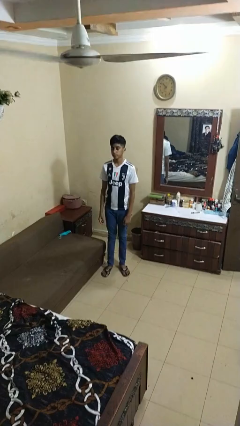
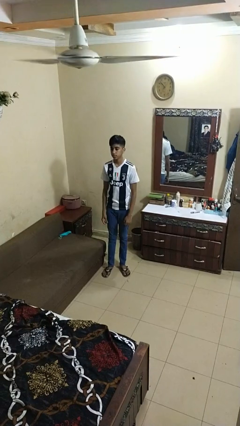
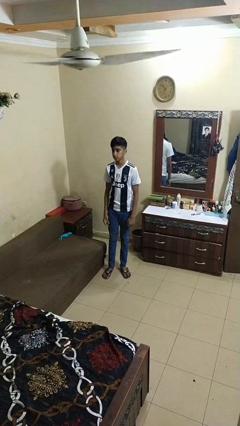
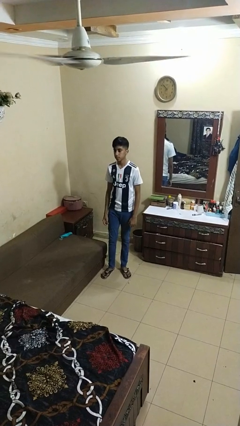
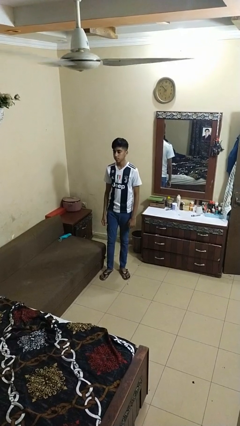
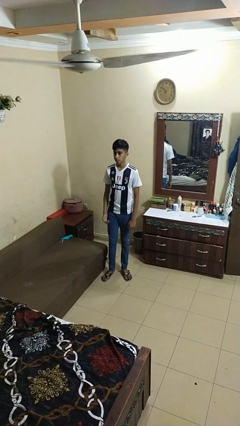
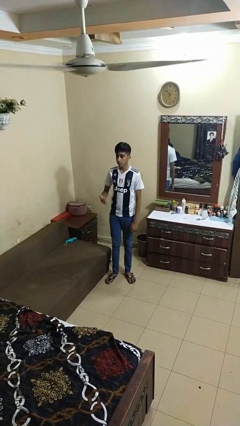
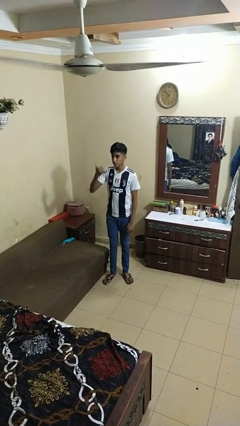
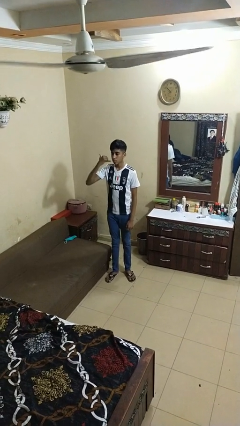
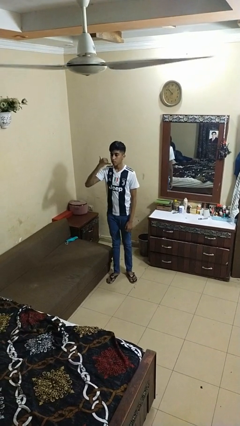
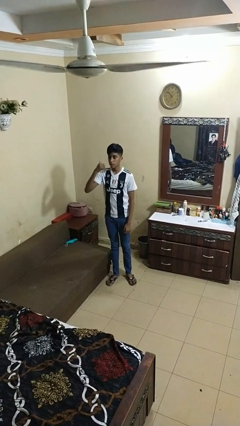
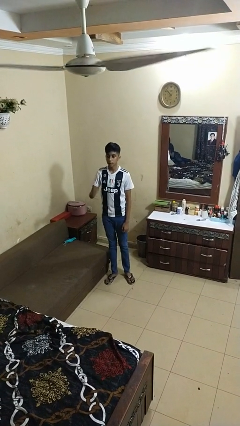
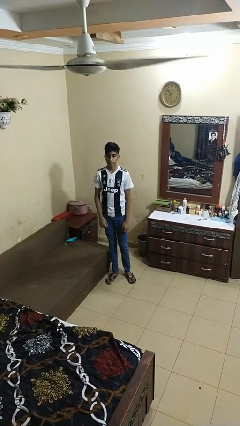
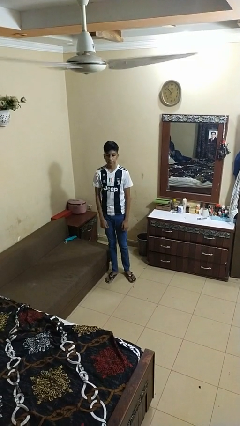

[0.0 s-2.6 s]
person gestures call me

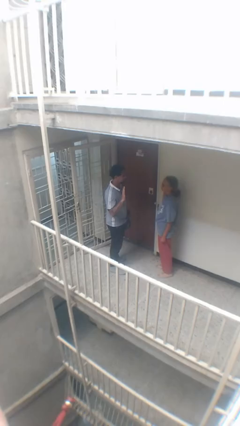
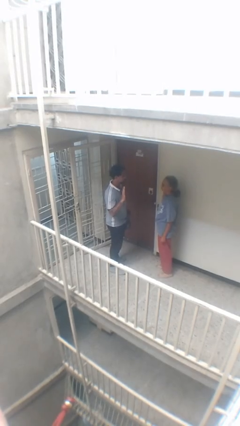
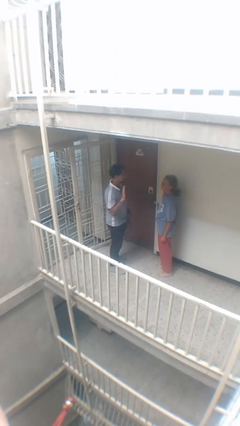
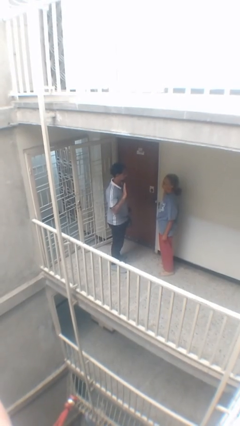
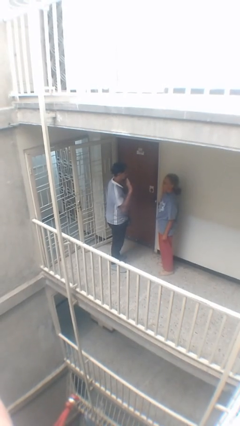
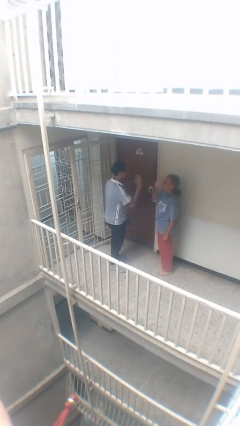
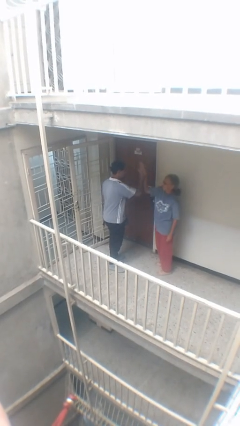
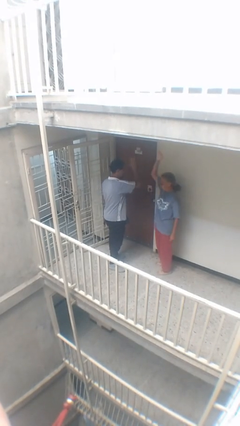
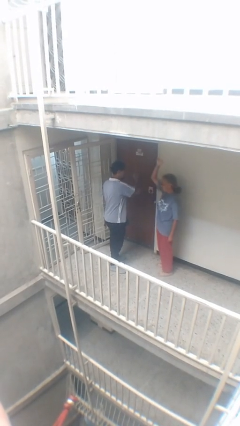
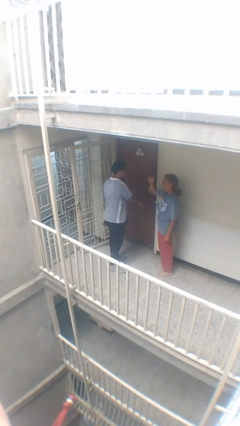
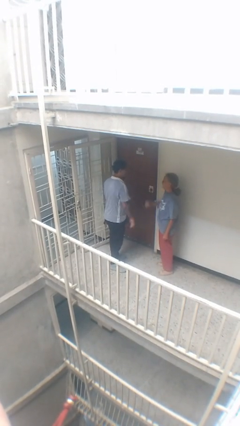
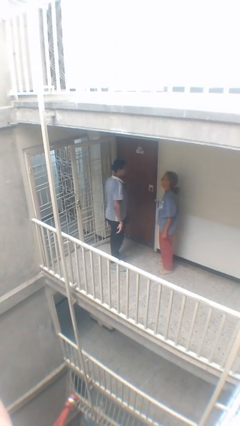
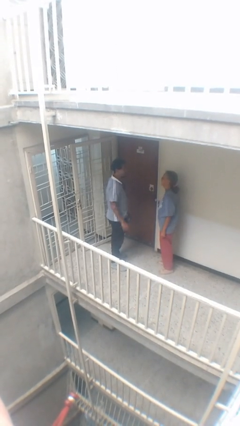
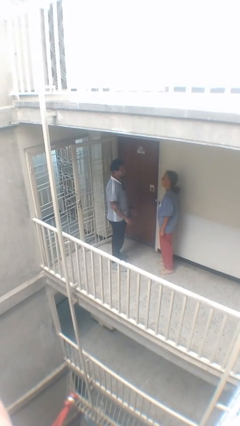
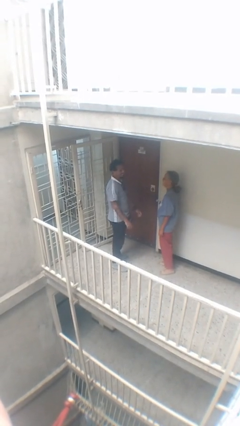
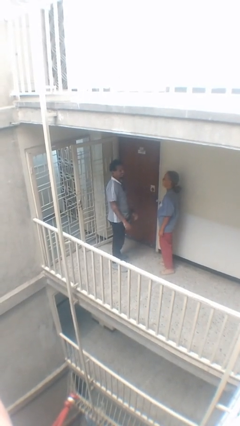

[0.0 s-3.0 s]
person highfives hand

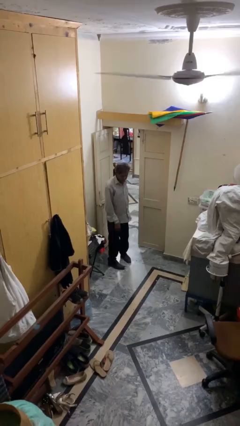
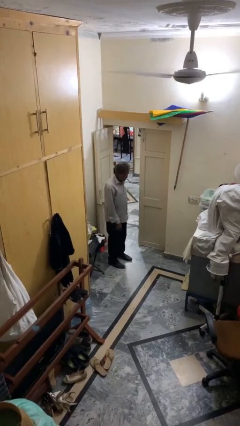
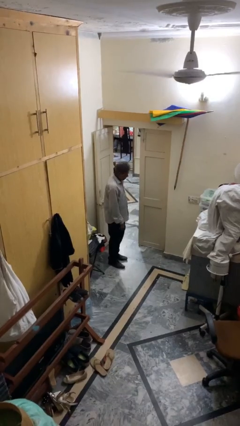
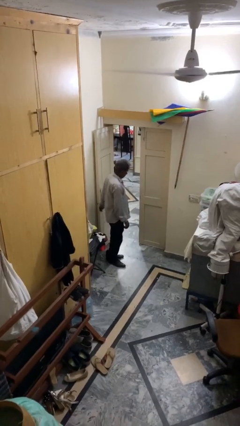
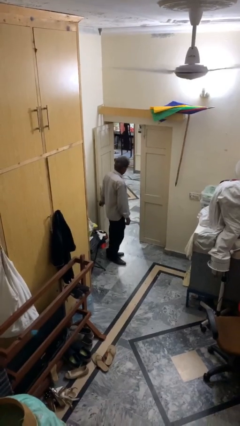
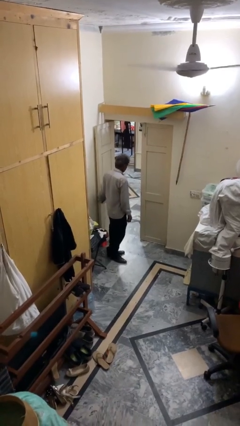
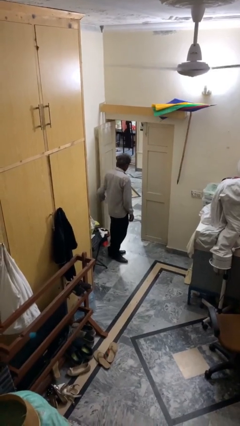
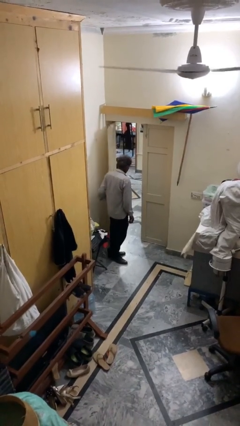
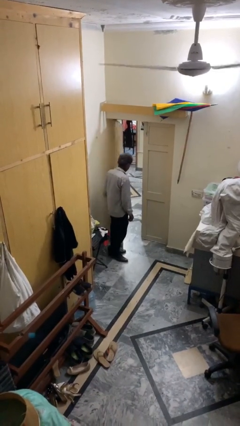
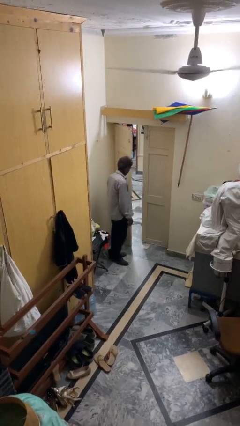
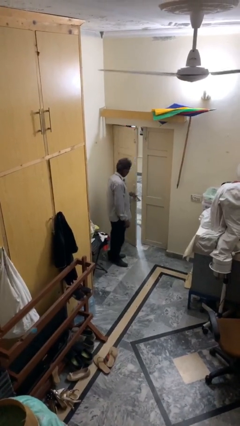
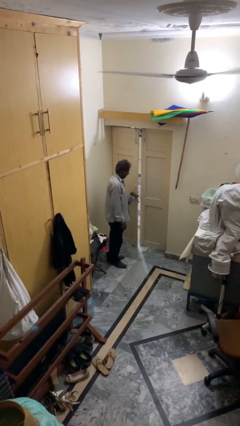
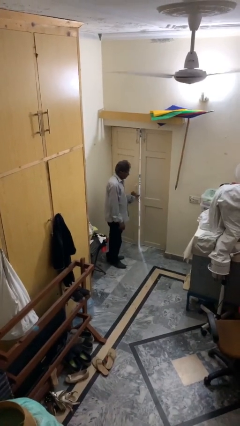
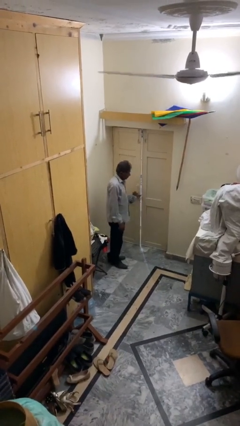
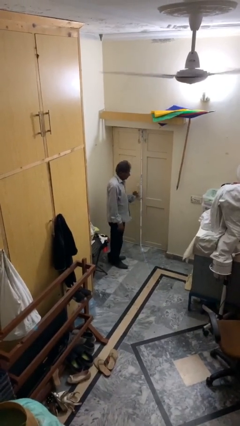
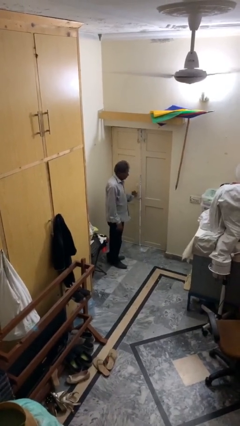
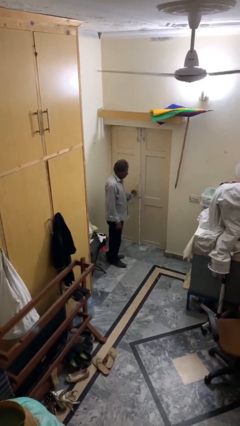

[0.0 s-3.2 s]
person closes facility door

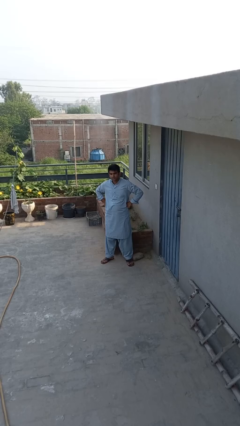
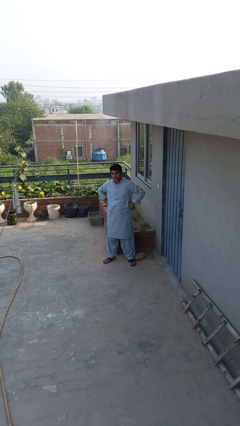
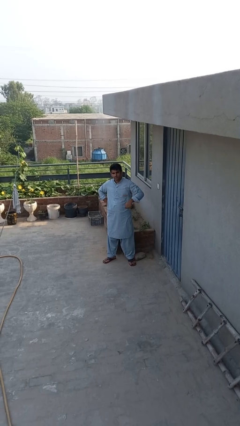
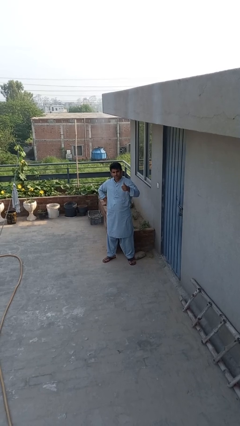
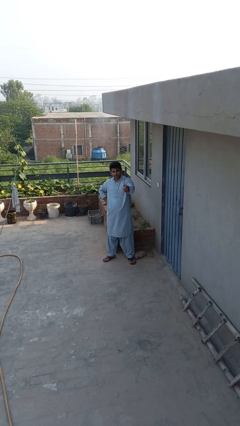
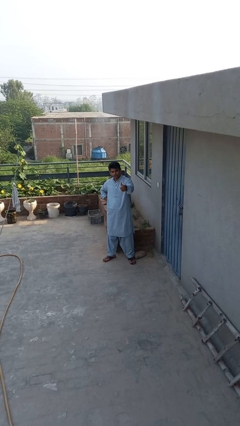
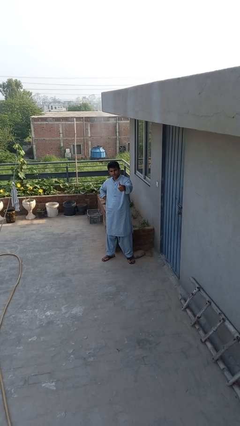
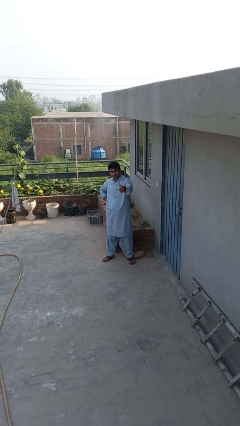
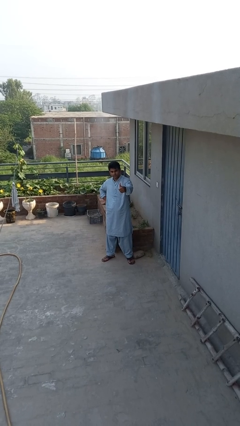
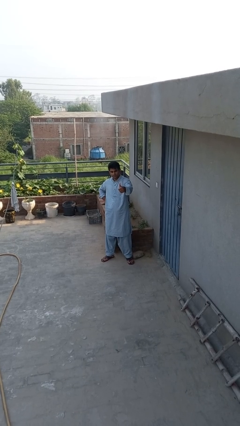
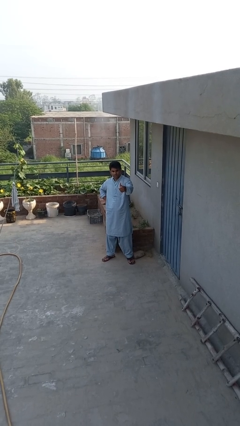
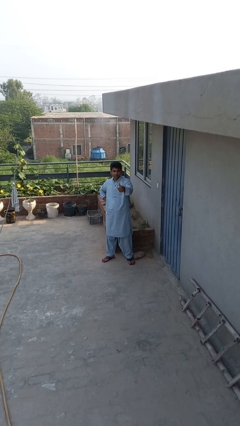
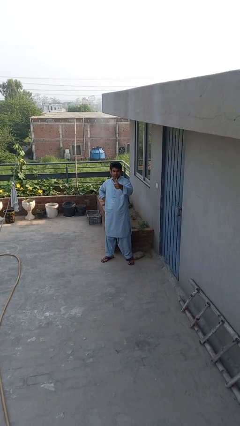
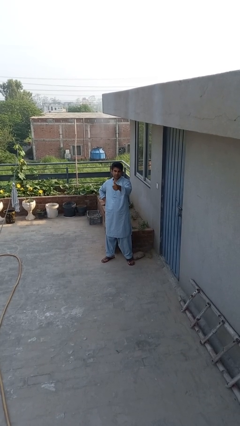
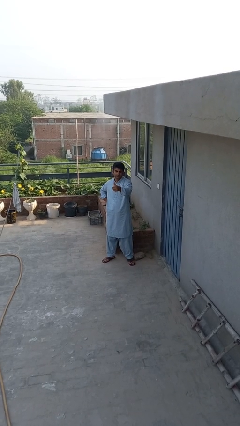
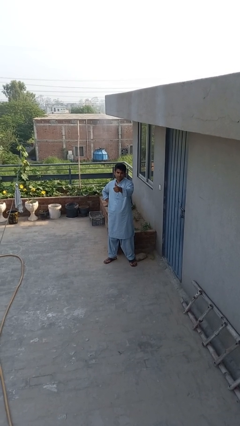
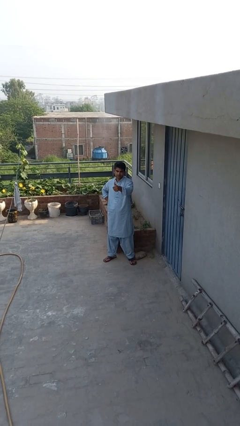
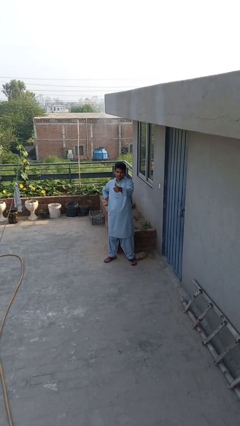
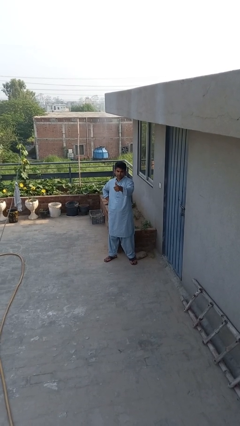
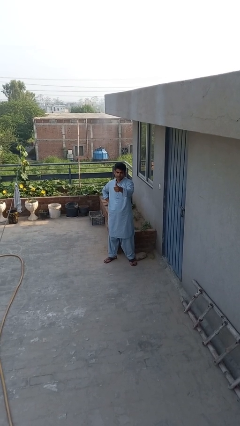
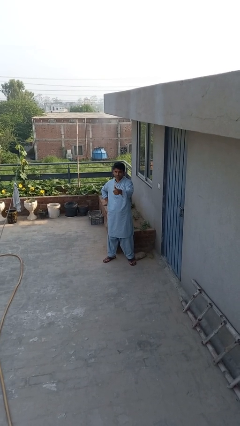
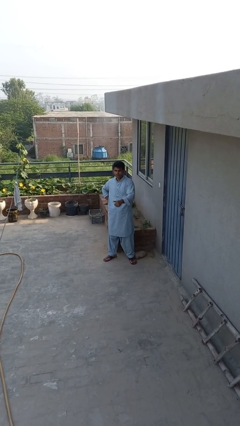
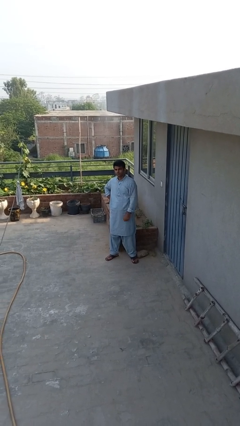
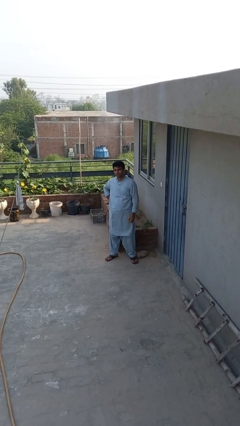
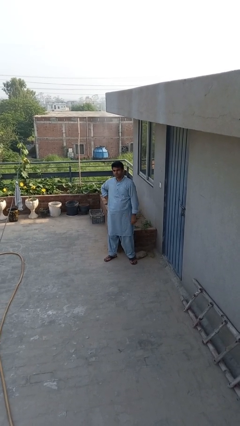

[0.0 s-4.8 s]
person gestures thumbs up

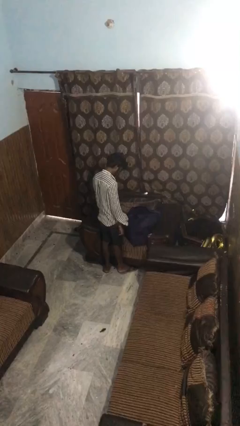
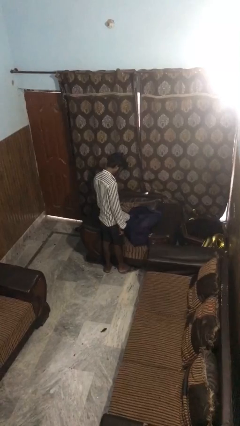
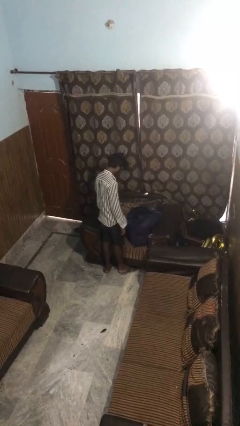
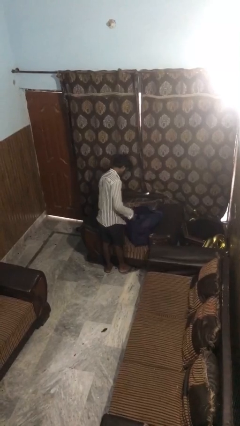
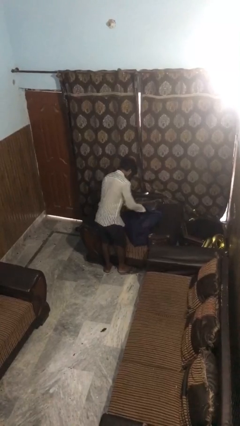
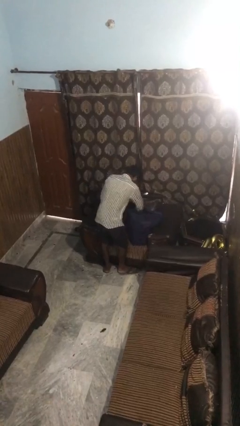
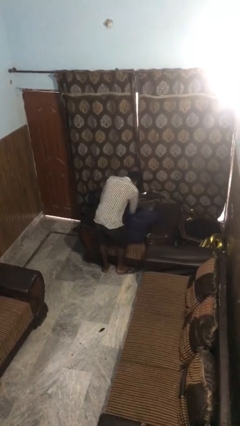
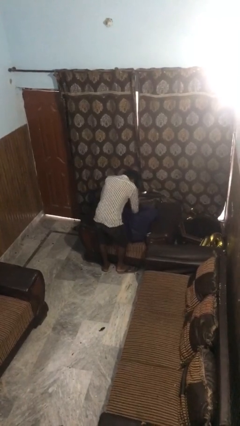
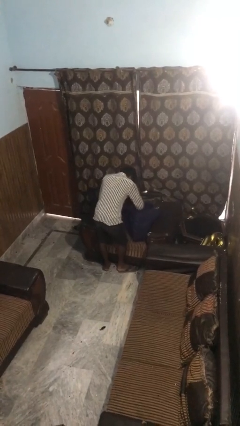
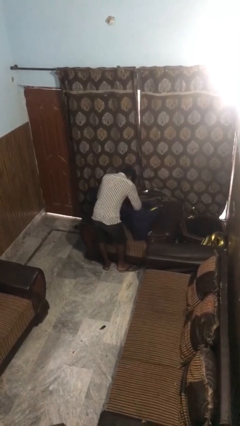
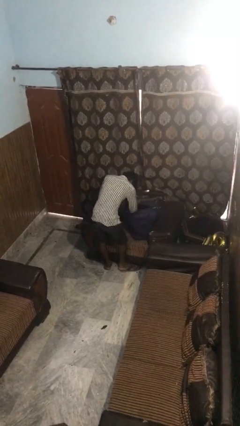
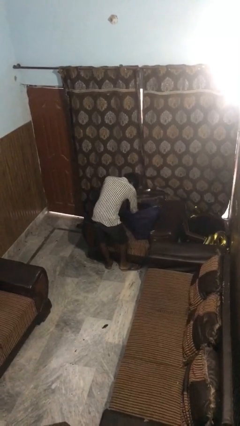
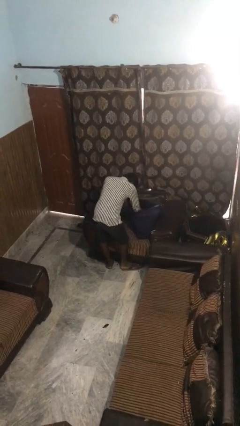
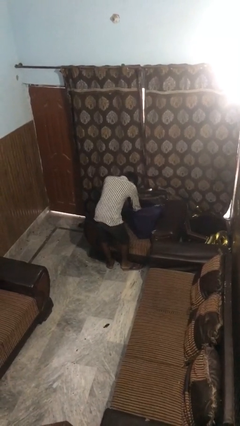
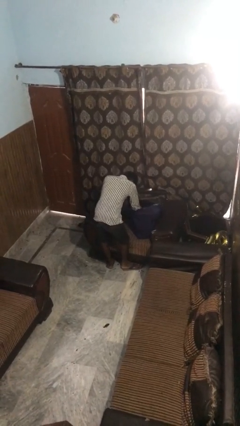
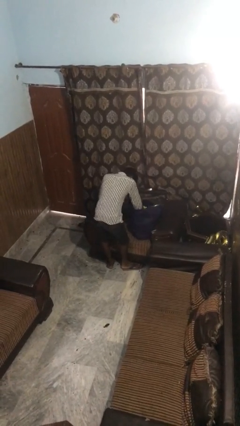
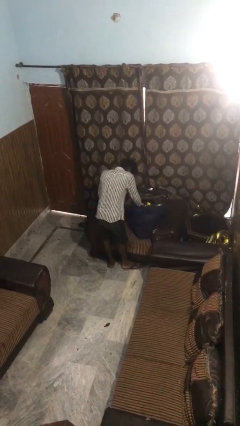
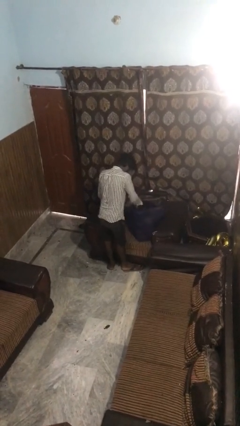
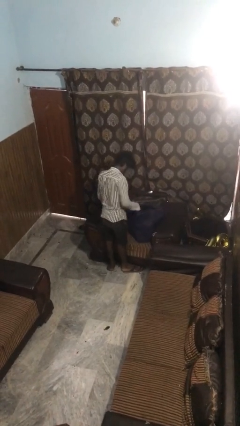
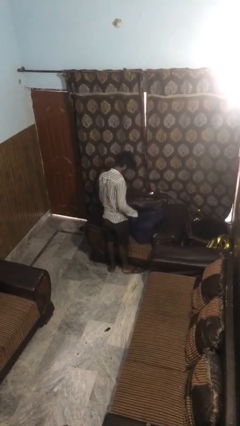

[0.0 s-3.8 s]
person searches in bag
